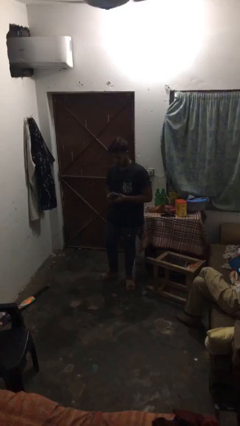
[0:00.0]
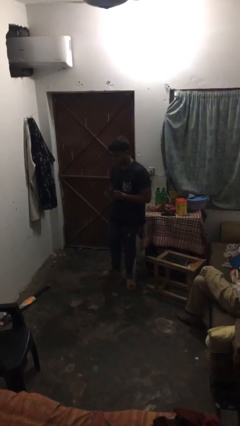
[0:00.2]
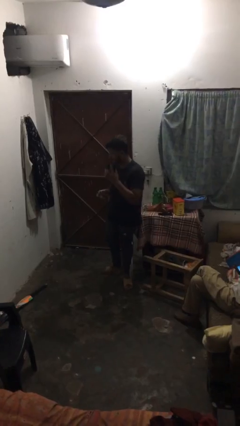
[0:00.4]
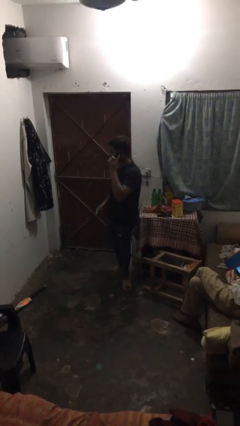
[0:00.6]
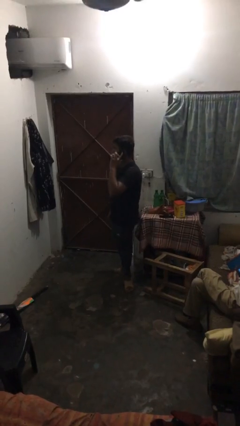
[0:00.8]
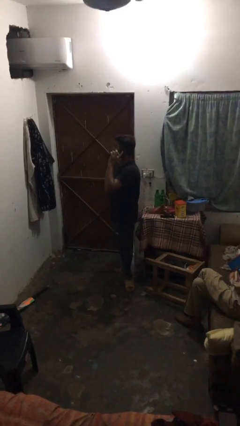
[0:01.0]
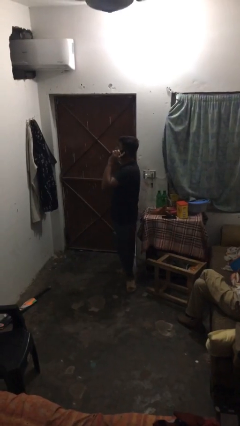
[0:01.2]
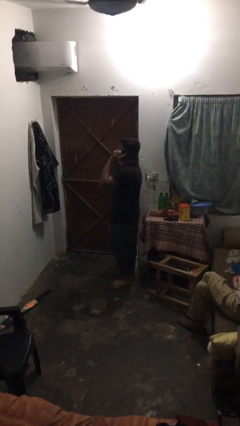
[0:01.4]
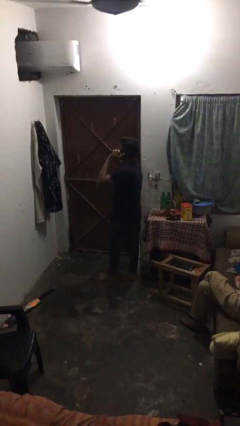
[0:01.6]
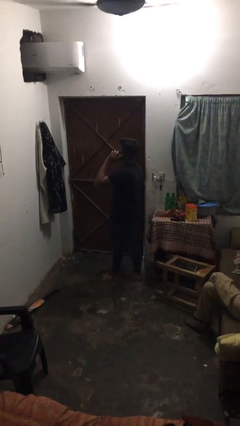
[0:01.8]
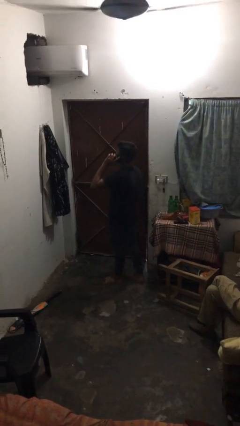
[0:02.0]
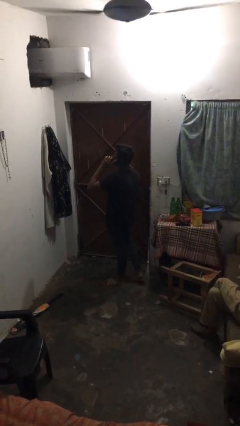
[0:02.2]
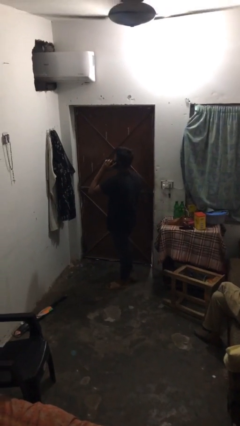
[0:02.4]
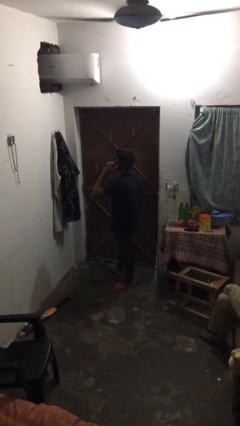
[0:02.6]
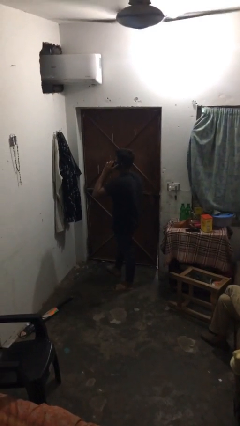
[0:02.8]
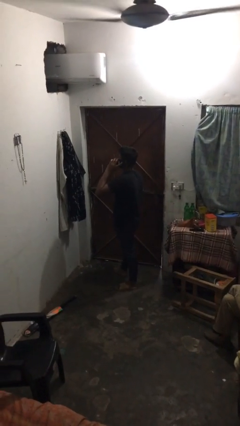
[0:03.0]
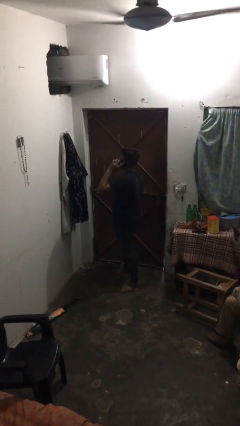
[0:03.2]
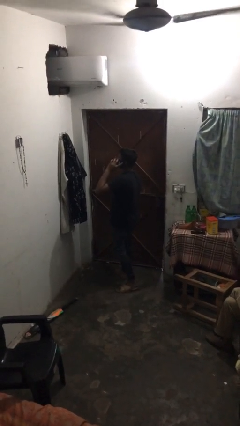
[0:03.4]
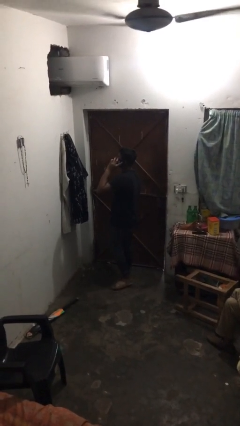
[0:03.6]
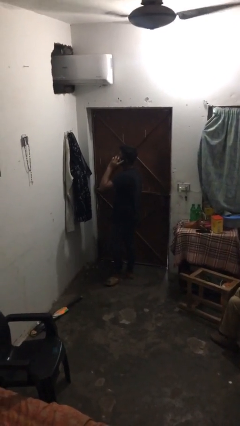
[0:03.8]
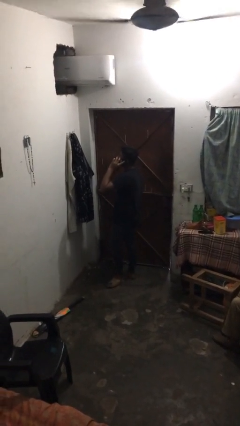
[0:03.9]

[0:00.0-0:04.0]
person talks on phone

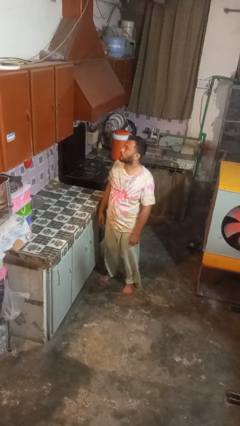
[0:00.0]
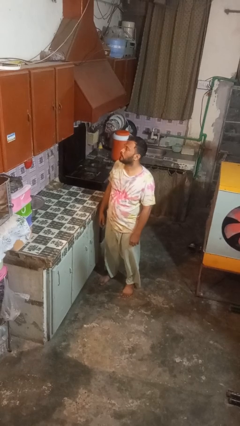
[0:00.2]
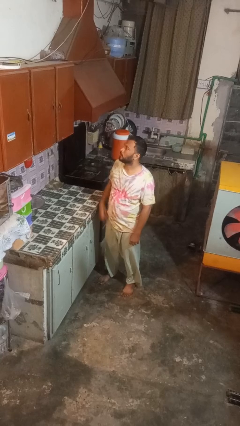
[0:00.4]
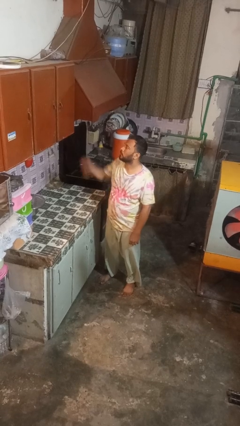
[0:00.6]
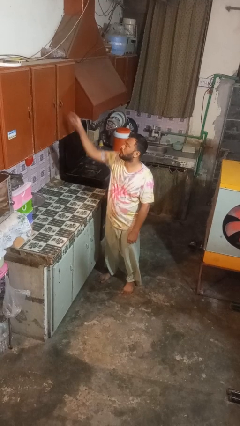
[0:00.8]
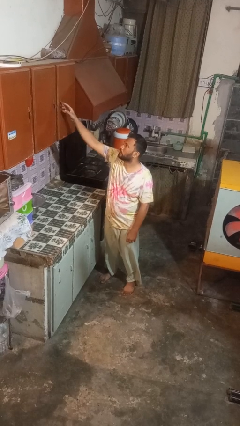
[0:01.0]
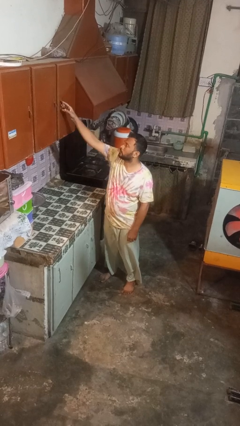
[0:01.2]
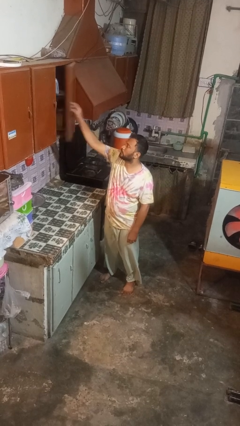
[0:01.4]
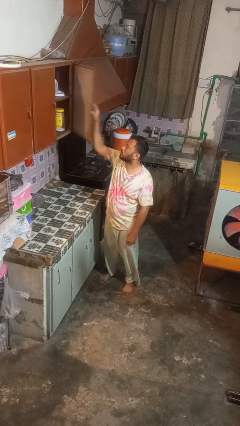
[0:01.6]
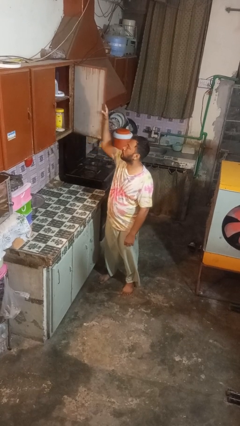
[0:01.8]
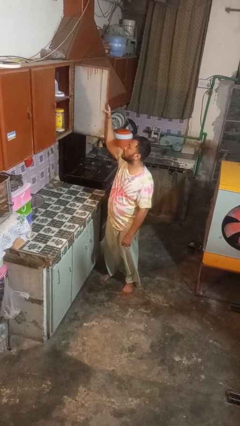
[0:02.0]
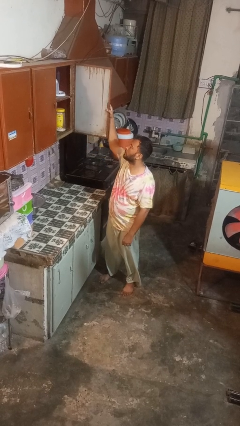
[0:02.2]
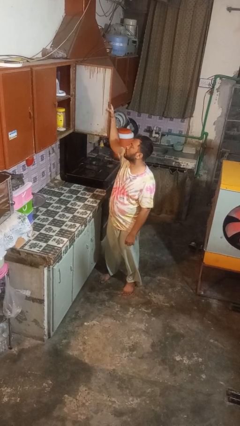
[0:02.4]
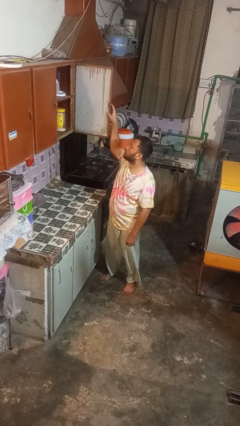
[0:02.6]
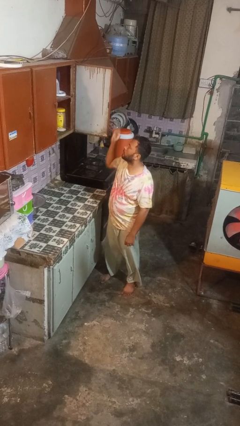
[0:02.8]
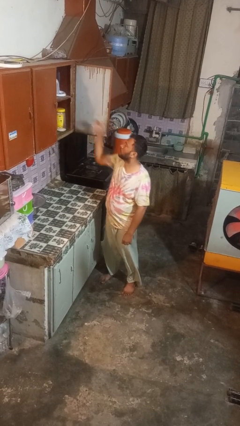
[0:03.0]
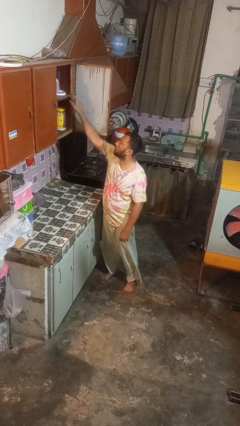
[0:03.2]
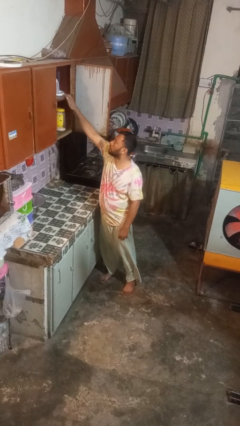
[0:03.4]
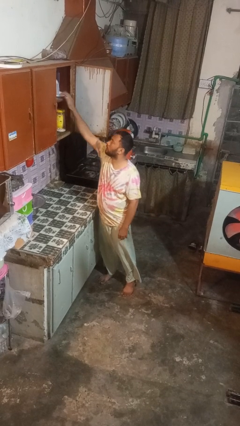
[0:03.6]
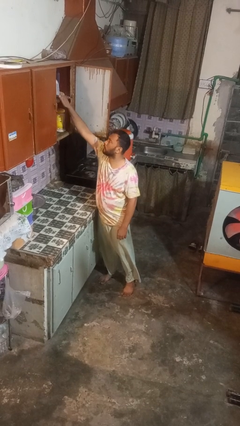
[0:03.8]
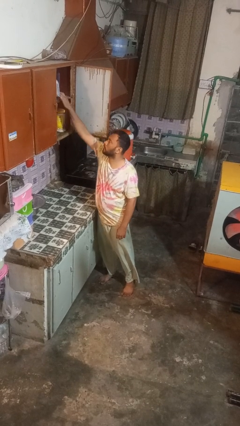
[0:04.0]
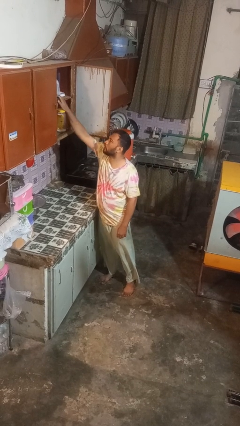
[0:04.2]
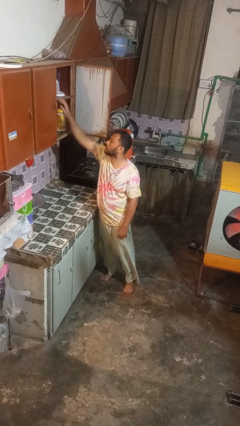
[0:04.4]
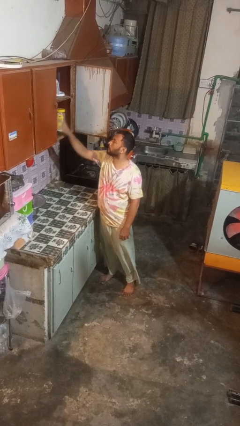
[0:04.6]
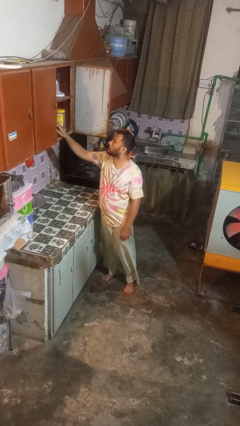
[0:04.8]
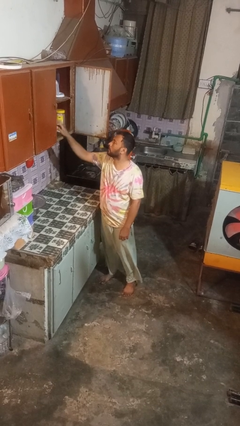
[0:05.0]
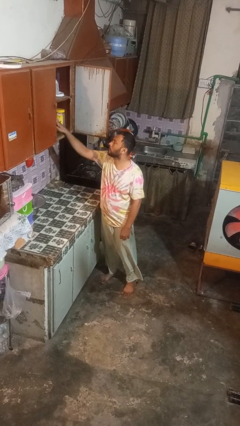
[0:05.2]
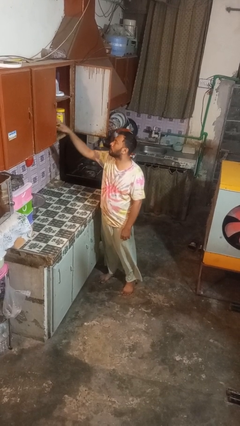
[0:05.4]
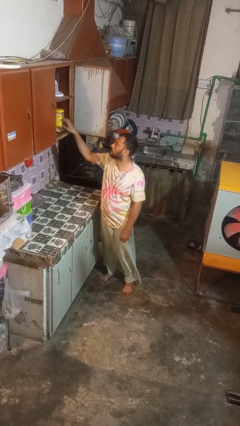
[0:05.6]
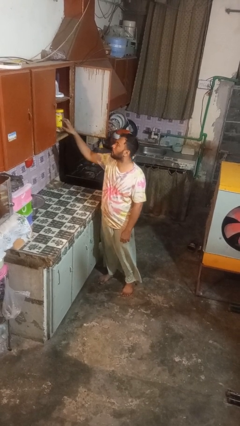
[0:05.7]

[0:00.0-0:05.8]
person opens cabinet

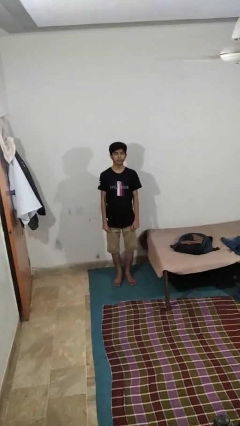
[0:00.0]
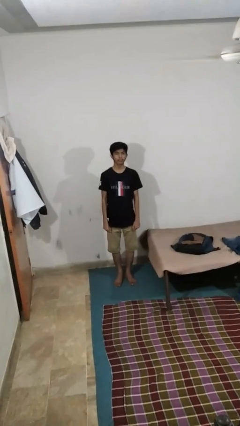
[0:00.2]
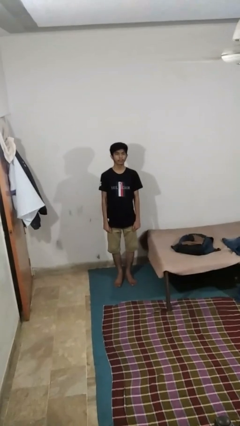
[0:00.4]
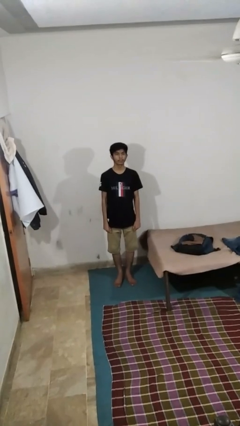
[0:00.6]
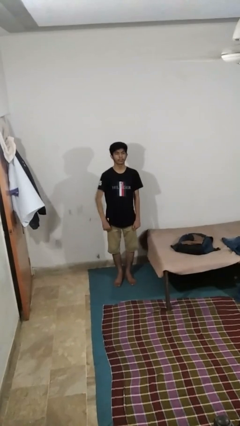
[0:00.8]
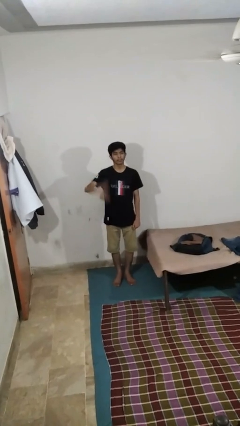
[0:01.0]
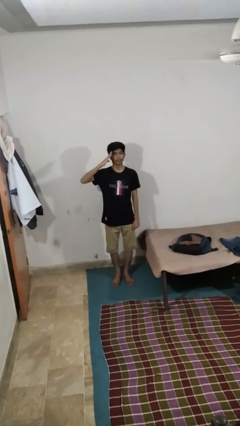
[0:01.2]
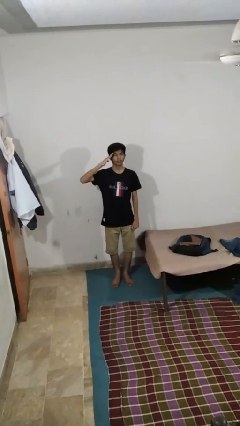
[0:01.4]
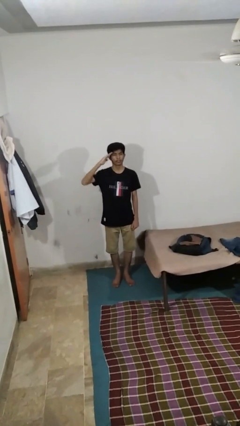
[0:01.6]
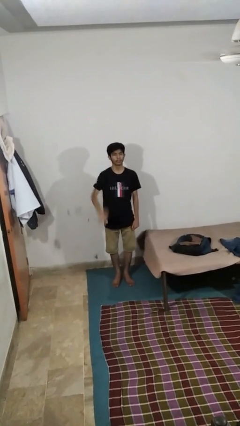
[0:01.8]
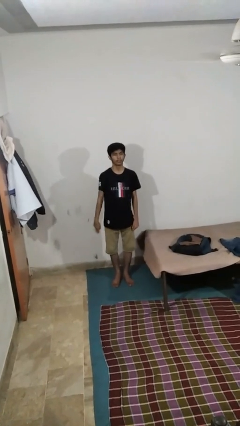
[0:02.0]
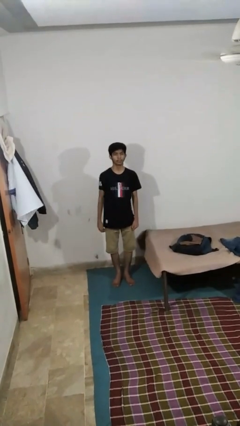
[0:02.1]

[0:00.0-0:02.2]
person salutes

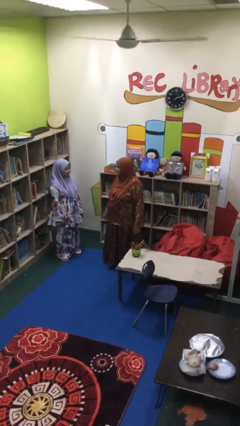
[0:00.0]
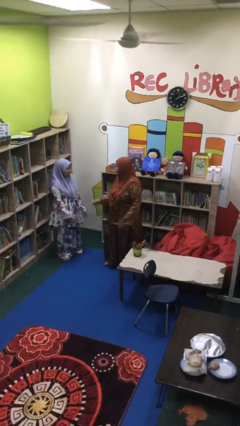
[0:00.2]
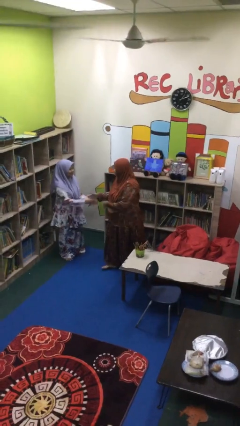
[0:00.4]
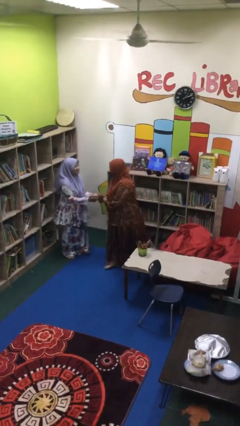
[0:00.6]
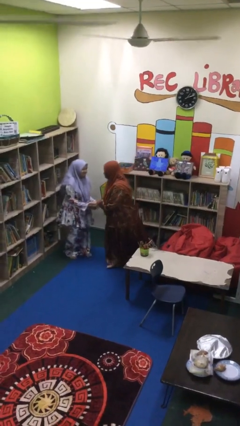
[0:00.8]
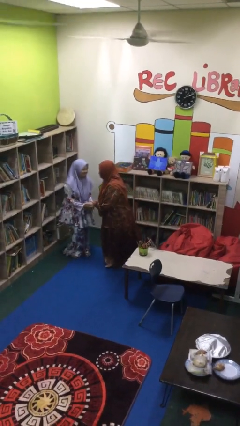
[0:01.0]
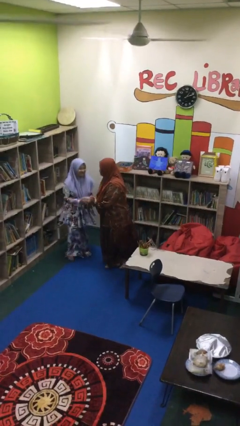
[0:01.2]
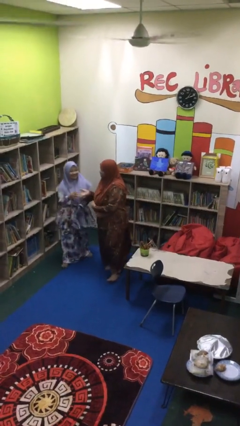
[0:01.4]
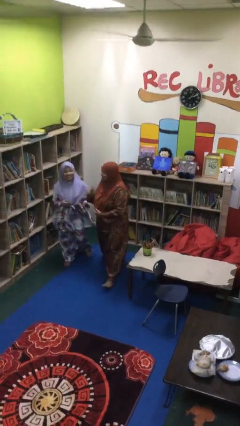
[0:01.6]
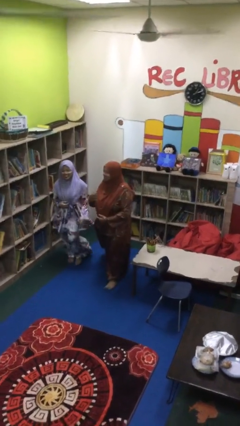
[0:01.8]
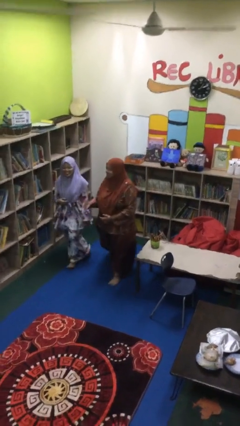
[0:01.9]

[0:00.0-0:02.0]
person shakes hand

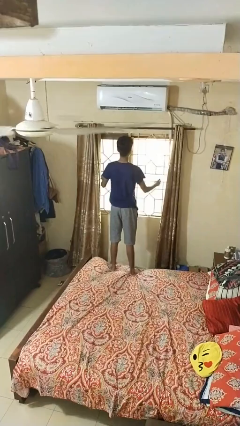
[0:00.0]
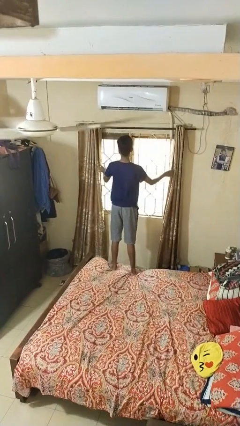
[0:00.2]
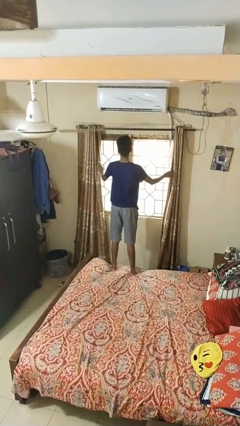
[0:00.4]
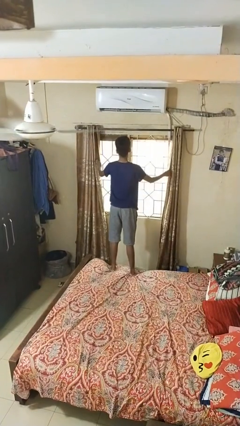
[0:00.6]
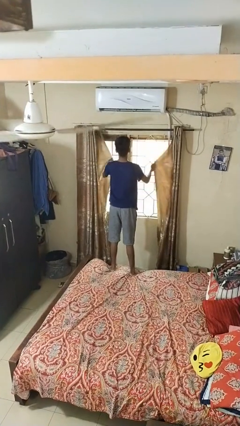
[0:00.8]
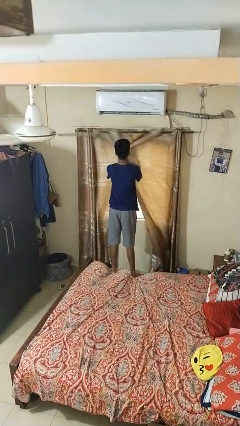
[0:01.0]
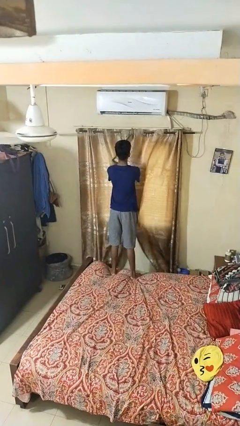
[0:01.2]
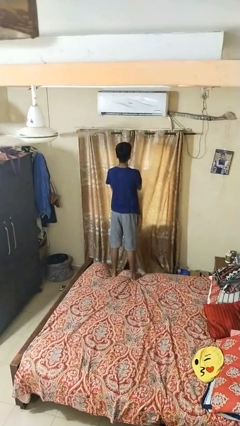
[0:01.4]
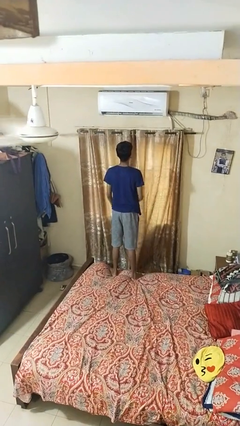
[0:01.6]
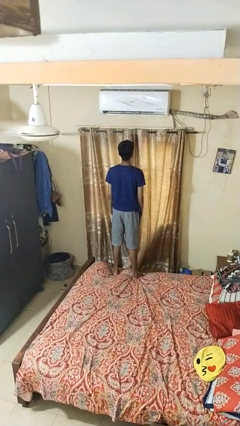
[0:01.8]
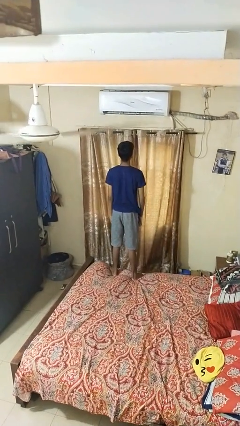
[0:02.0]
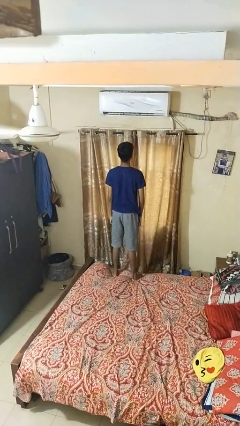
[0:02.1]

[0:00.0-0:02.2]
person closes curtains

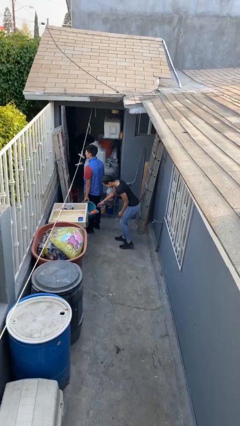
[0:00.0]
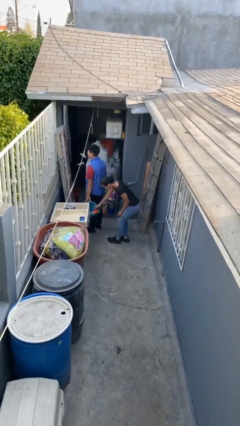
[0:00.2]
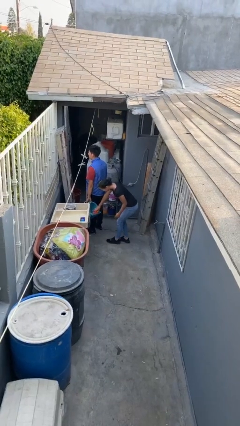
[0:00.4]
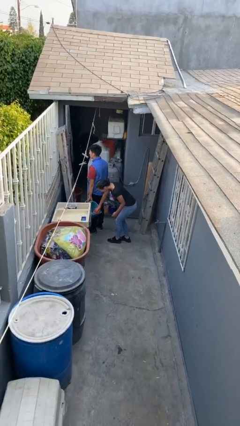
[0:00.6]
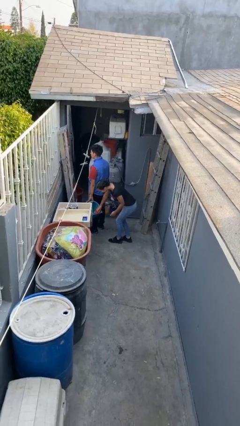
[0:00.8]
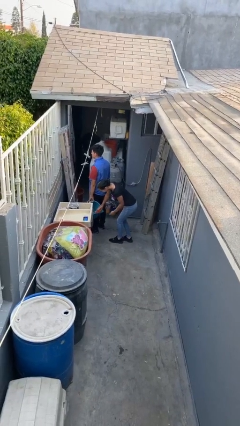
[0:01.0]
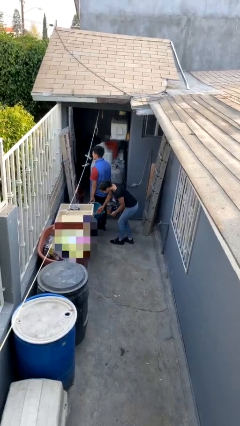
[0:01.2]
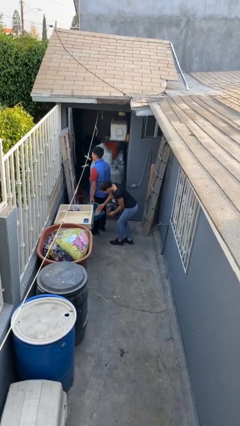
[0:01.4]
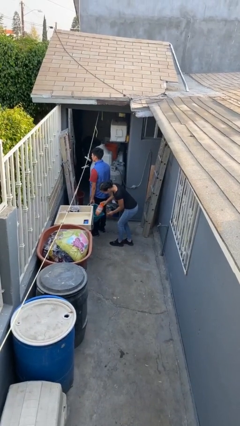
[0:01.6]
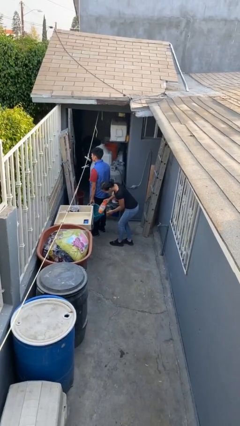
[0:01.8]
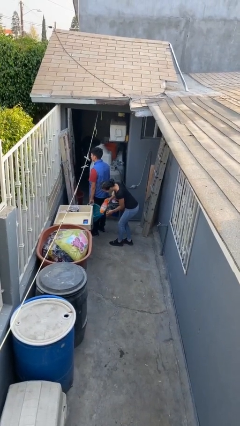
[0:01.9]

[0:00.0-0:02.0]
person steals object from person
